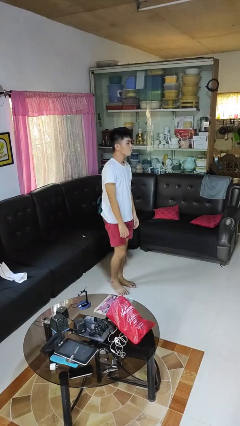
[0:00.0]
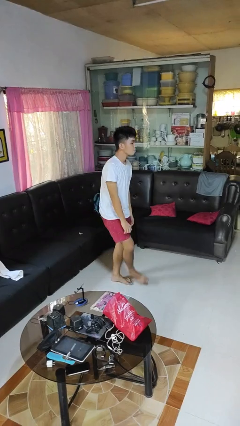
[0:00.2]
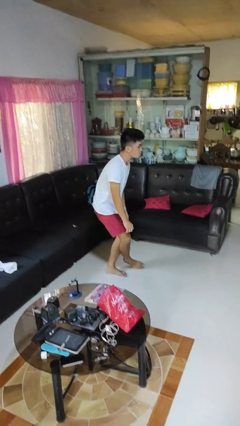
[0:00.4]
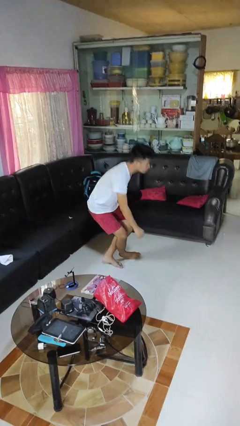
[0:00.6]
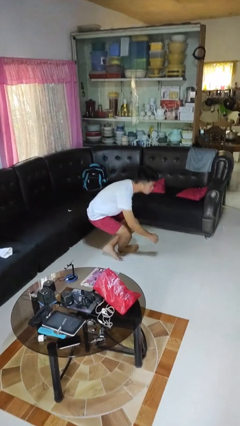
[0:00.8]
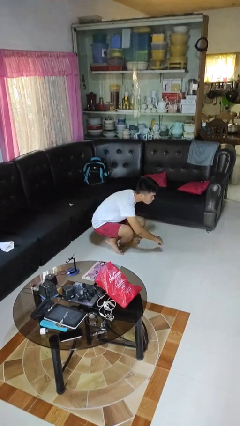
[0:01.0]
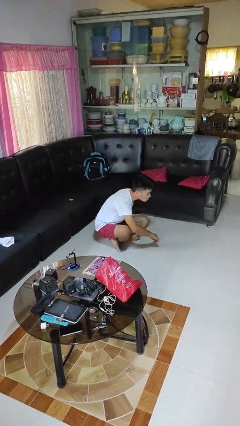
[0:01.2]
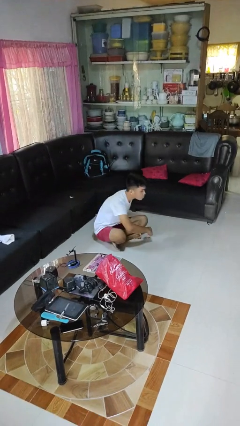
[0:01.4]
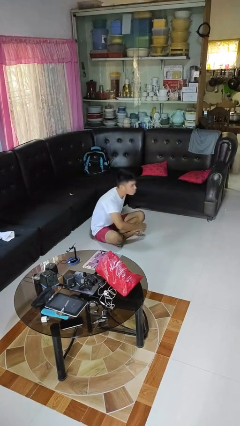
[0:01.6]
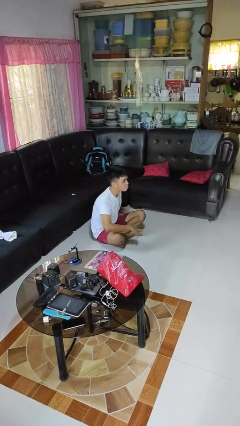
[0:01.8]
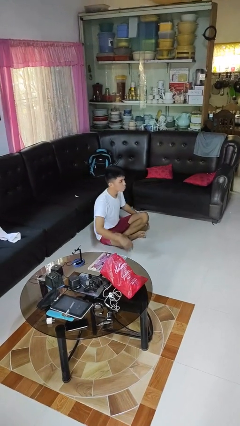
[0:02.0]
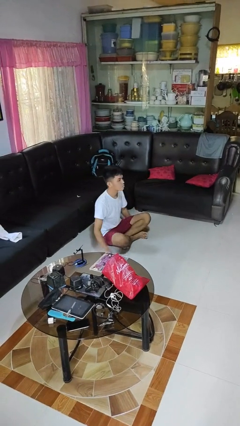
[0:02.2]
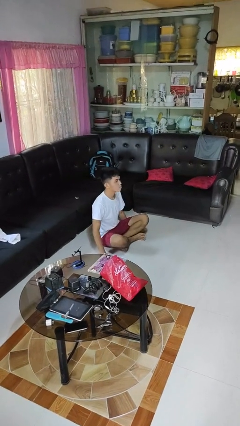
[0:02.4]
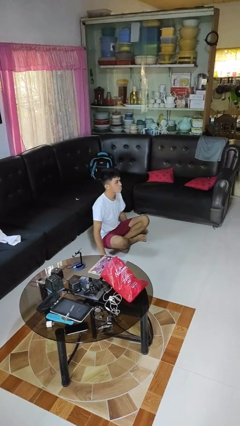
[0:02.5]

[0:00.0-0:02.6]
person sits crisscross

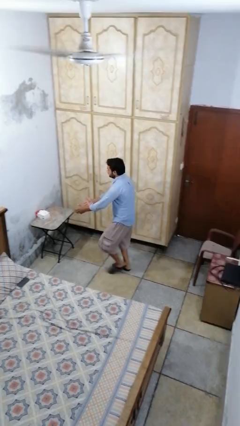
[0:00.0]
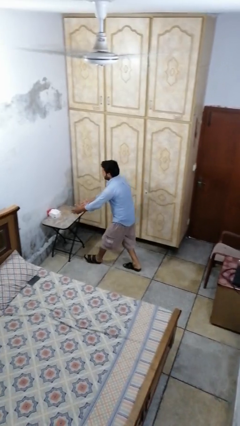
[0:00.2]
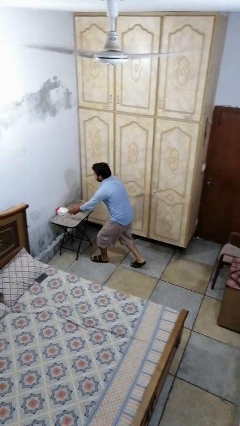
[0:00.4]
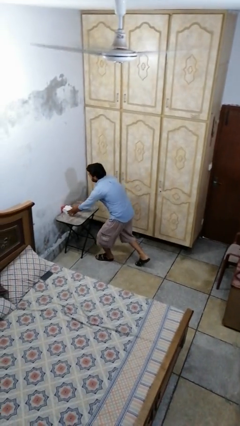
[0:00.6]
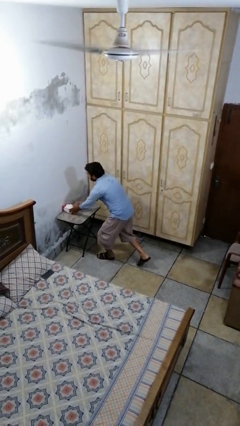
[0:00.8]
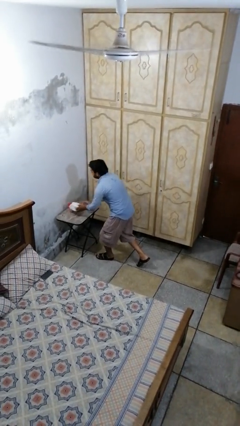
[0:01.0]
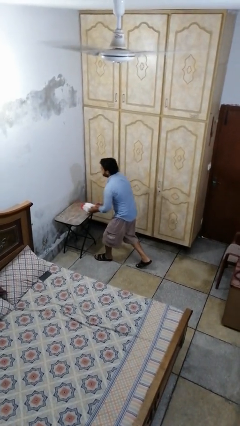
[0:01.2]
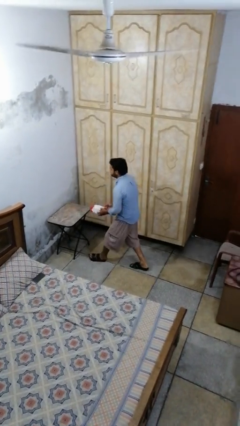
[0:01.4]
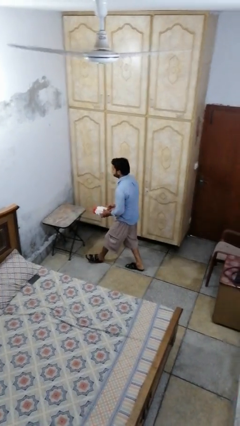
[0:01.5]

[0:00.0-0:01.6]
person picks up object from table

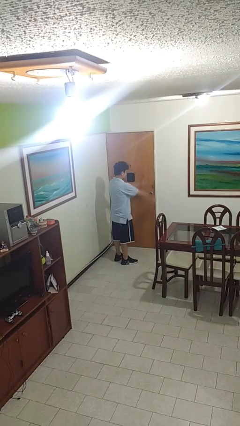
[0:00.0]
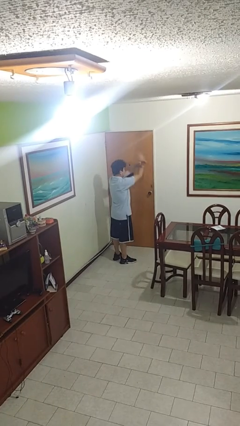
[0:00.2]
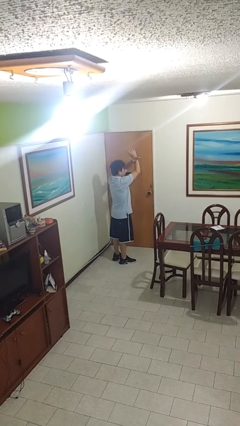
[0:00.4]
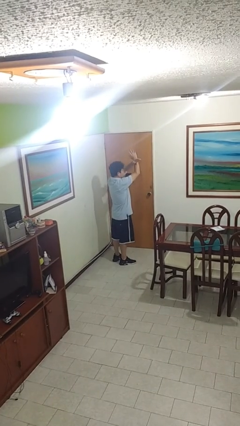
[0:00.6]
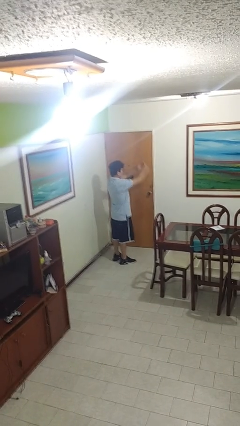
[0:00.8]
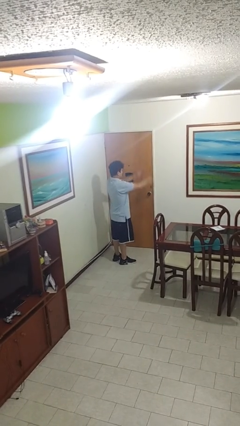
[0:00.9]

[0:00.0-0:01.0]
person gestures arms x

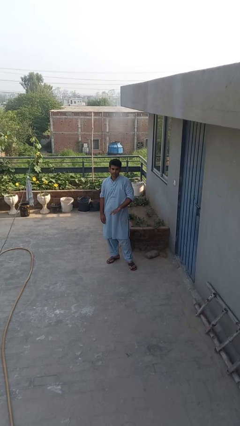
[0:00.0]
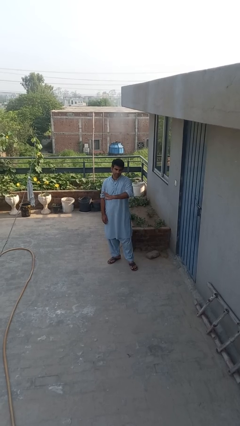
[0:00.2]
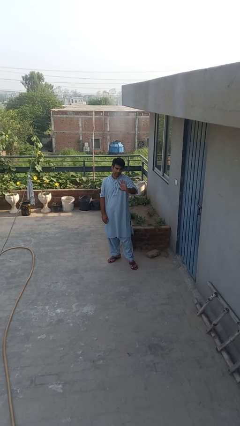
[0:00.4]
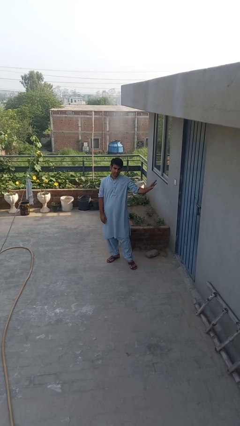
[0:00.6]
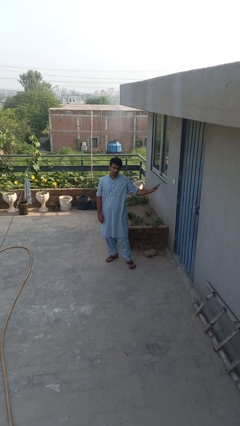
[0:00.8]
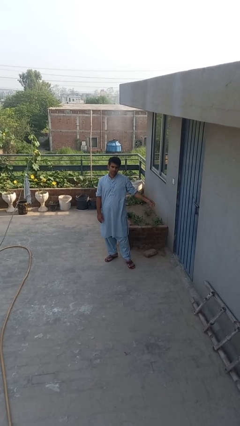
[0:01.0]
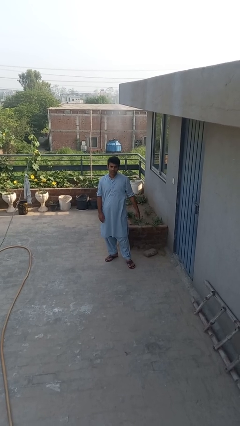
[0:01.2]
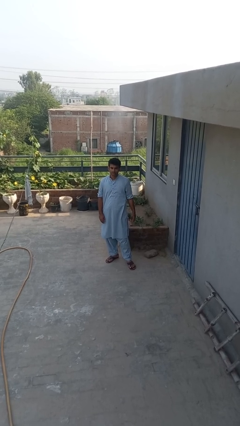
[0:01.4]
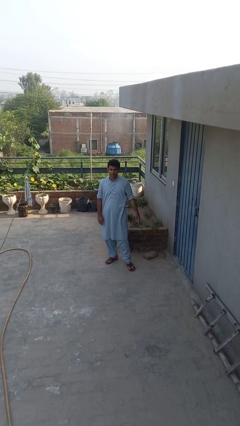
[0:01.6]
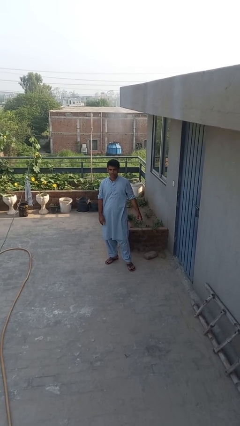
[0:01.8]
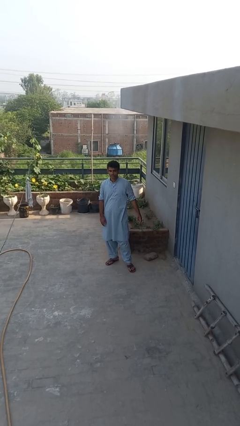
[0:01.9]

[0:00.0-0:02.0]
person gestures swipe left

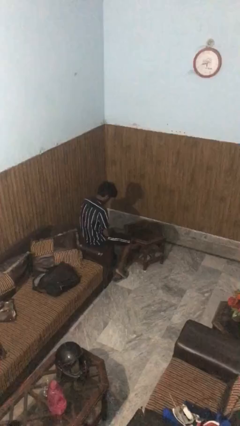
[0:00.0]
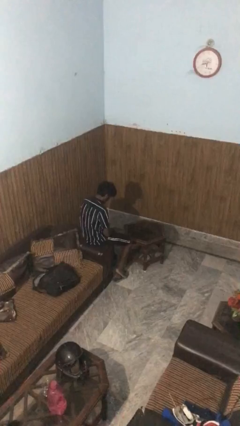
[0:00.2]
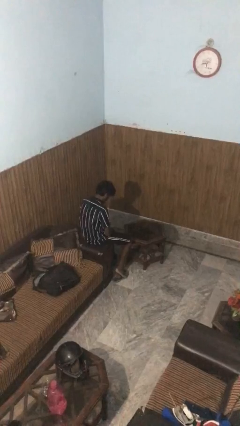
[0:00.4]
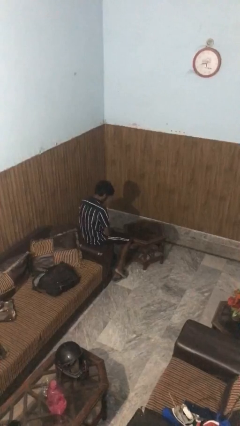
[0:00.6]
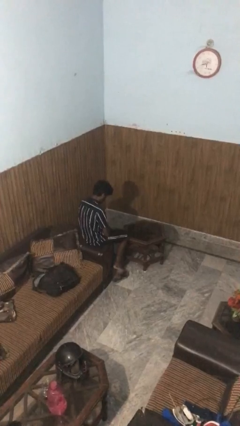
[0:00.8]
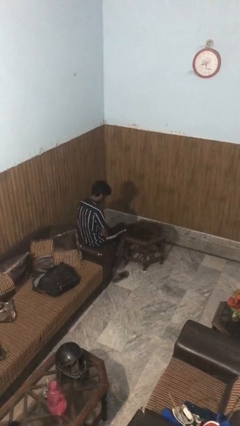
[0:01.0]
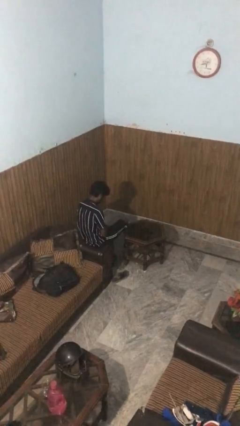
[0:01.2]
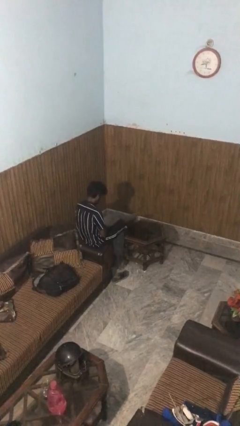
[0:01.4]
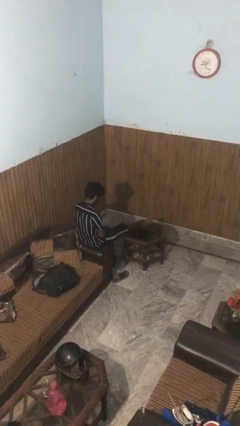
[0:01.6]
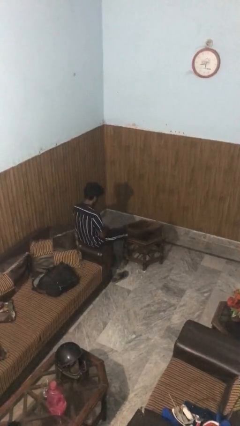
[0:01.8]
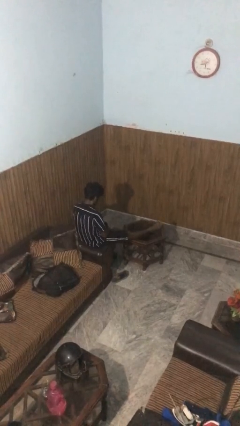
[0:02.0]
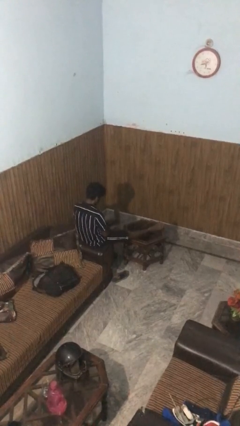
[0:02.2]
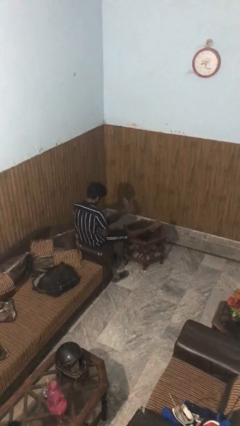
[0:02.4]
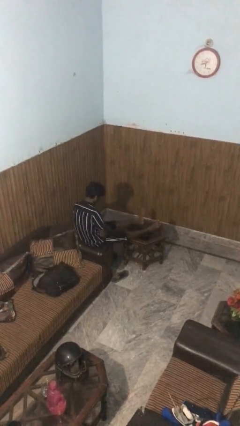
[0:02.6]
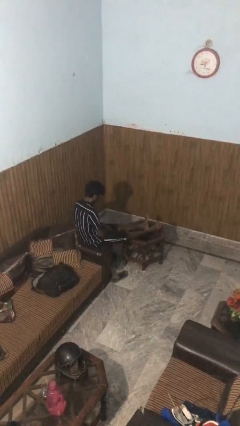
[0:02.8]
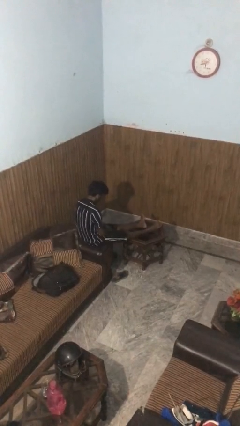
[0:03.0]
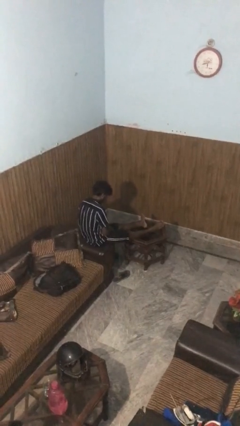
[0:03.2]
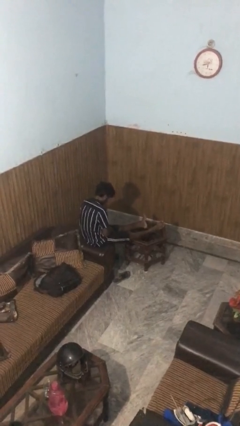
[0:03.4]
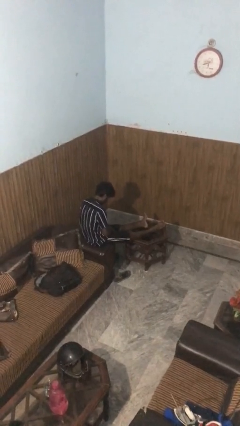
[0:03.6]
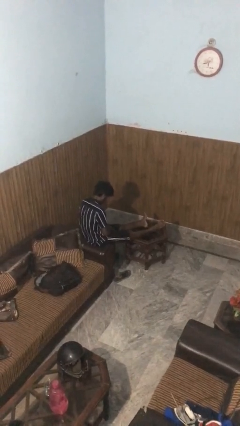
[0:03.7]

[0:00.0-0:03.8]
person puts feet up

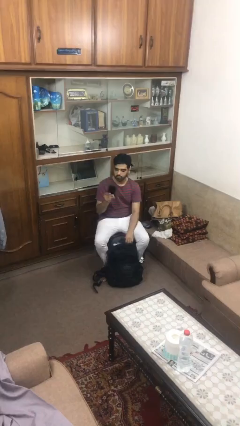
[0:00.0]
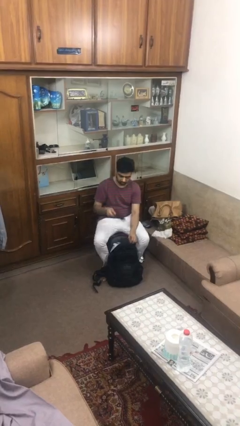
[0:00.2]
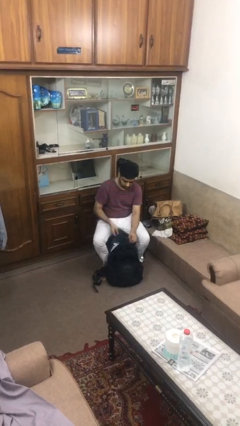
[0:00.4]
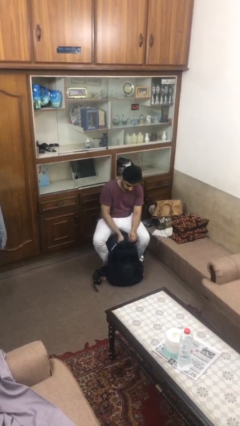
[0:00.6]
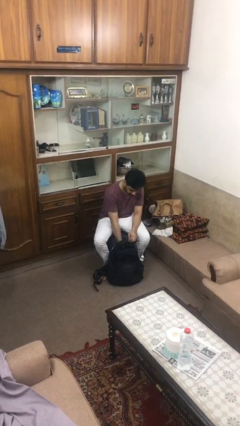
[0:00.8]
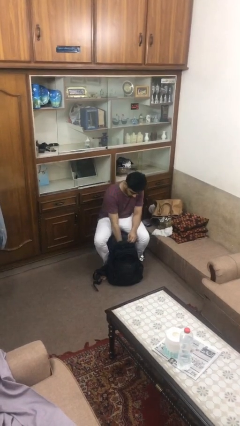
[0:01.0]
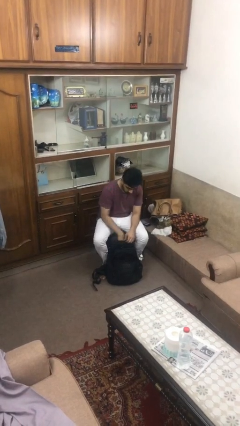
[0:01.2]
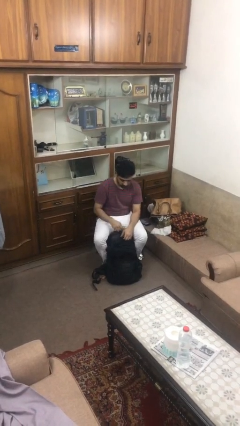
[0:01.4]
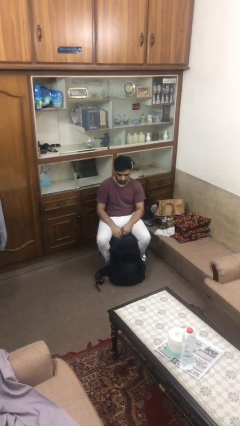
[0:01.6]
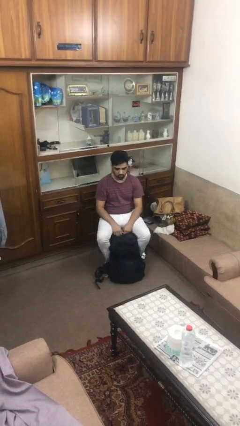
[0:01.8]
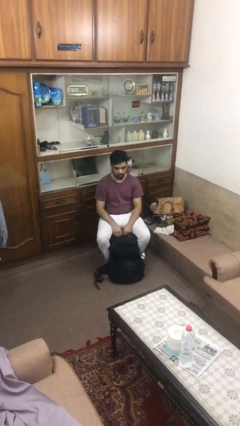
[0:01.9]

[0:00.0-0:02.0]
person puts object into backpack

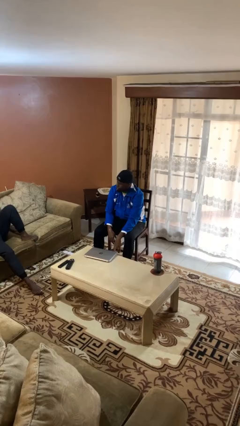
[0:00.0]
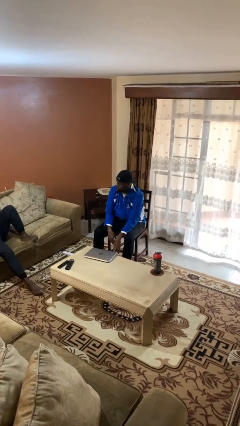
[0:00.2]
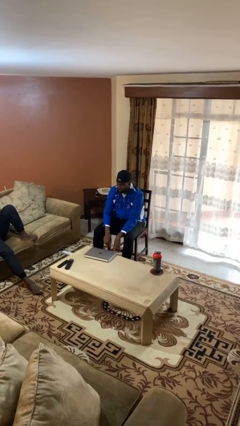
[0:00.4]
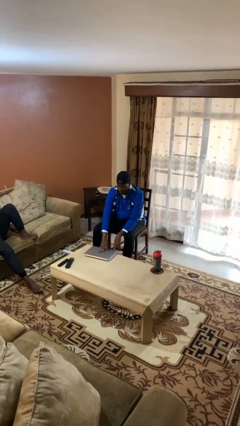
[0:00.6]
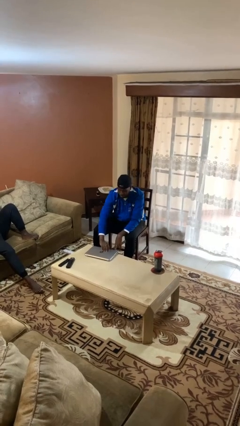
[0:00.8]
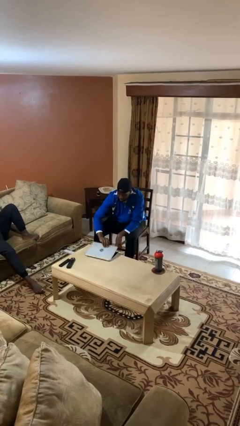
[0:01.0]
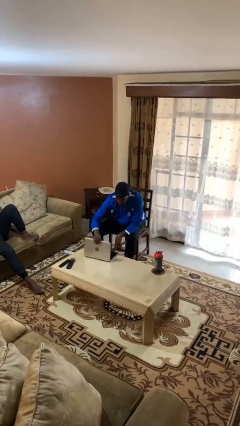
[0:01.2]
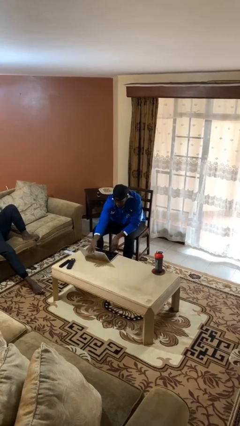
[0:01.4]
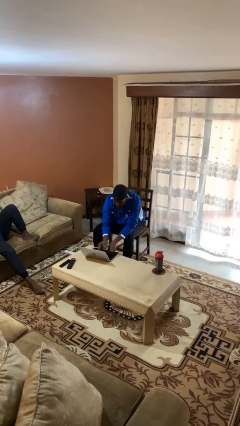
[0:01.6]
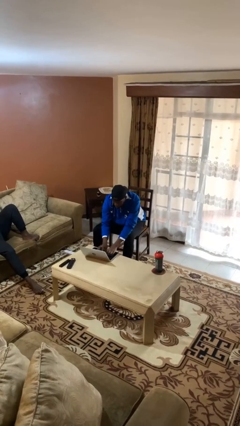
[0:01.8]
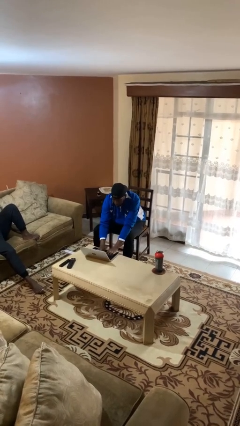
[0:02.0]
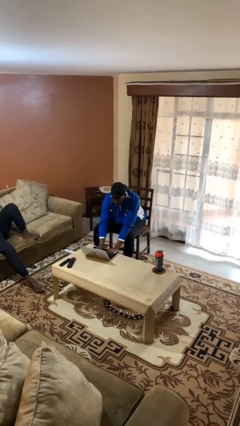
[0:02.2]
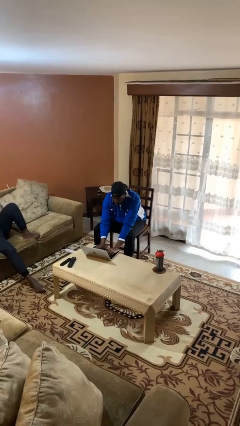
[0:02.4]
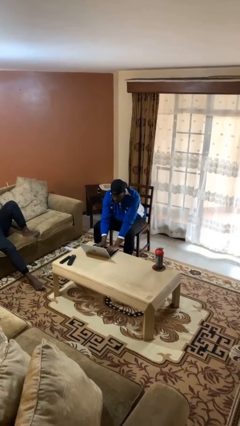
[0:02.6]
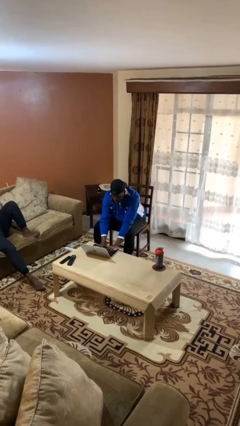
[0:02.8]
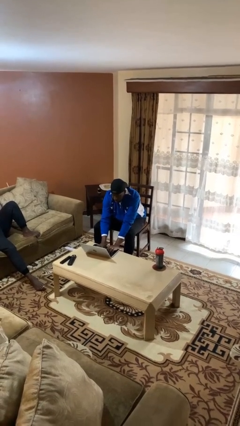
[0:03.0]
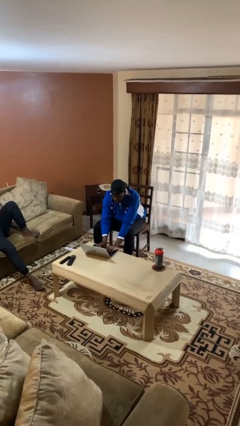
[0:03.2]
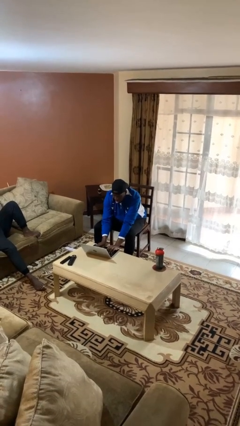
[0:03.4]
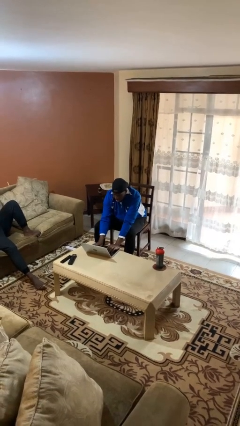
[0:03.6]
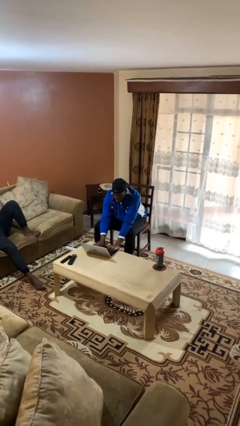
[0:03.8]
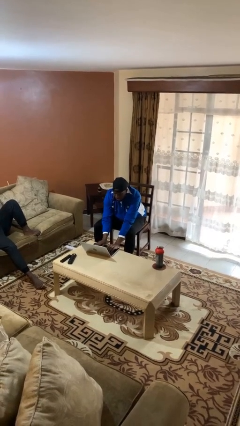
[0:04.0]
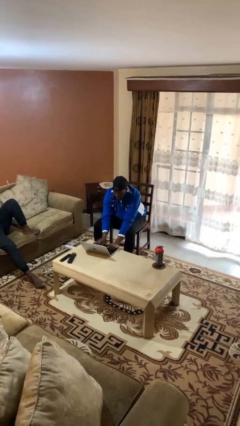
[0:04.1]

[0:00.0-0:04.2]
person interacts with laptop
